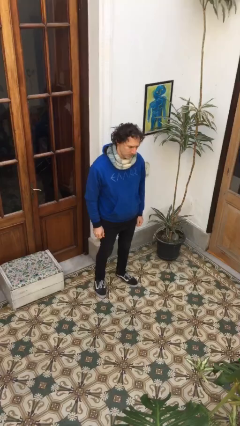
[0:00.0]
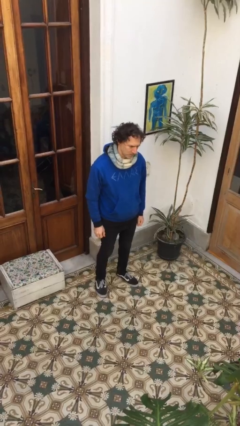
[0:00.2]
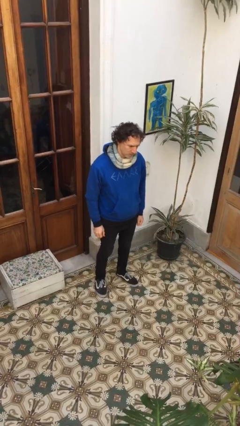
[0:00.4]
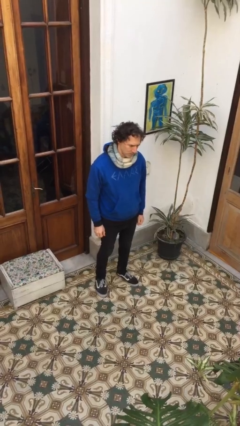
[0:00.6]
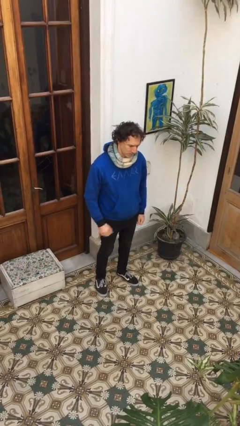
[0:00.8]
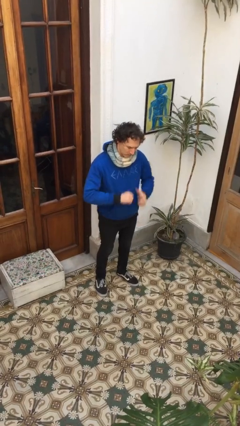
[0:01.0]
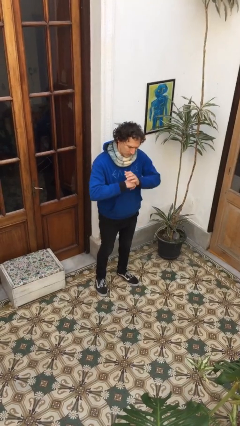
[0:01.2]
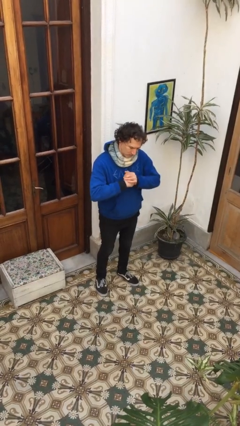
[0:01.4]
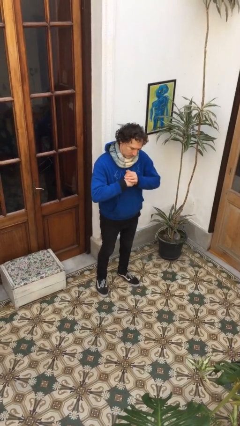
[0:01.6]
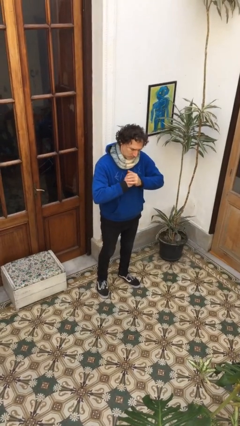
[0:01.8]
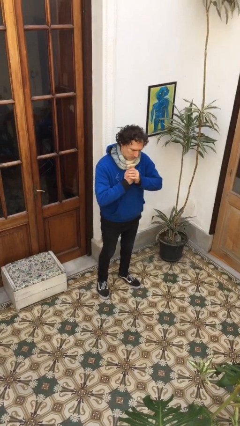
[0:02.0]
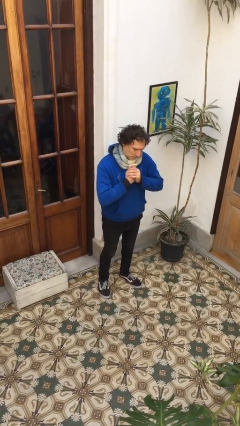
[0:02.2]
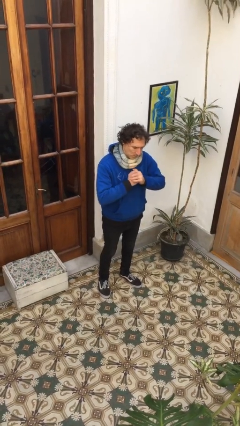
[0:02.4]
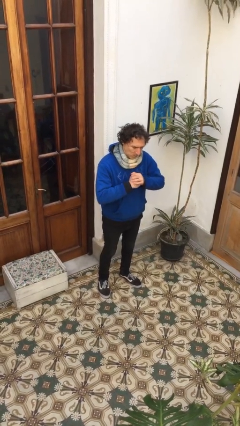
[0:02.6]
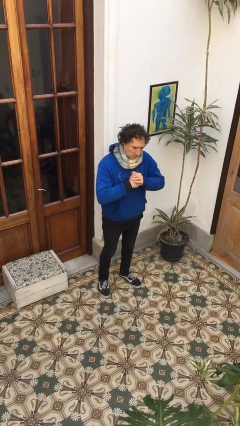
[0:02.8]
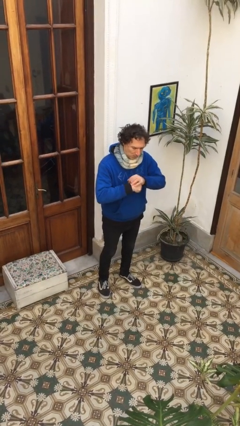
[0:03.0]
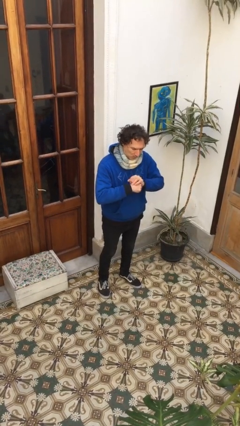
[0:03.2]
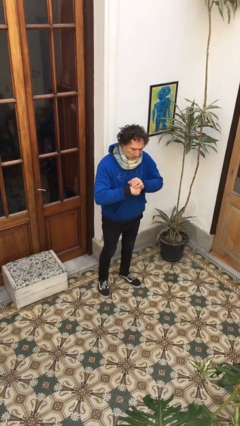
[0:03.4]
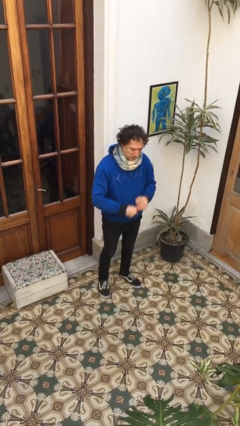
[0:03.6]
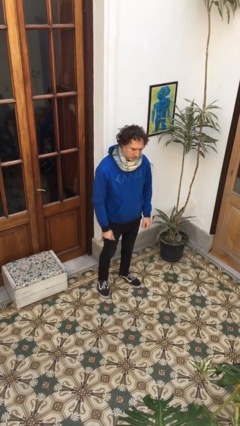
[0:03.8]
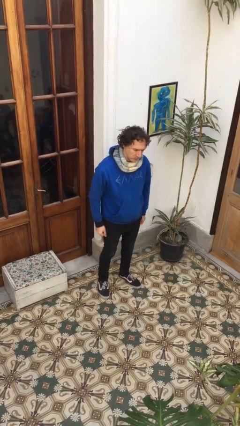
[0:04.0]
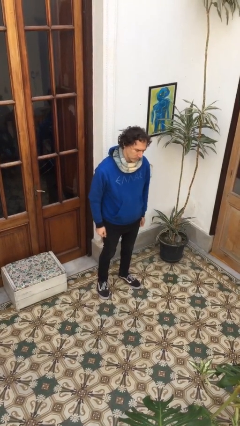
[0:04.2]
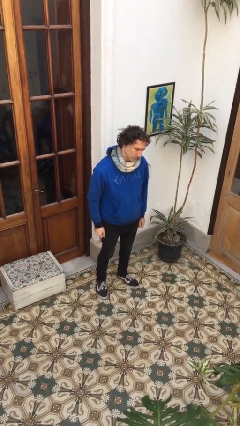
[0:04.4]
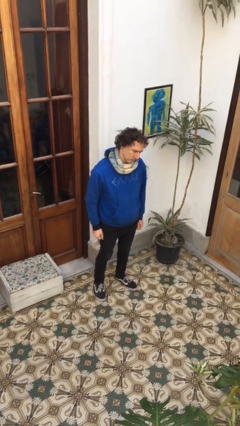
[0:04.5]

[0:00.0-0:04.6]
person cracks knuckles

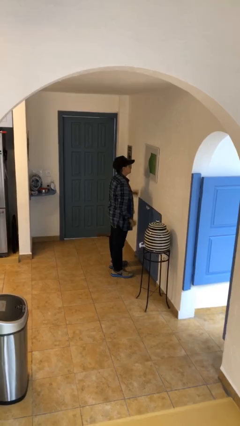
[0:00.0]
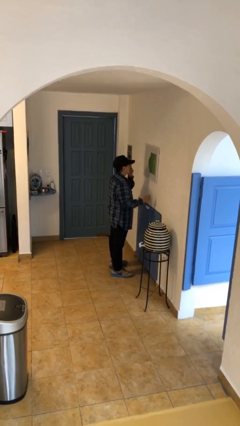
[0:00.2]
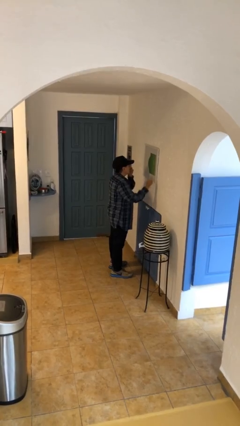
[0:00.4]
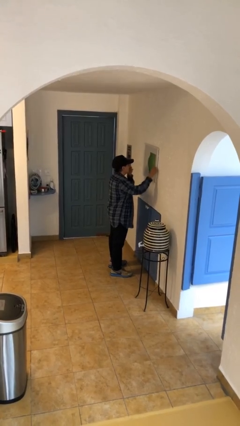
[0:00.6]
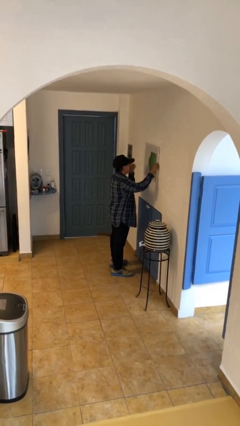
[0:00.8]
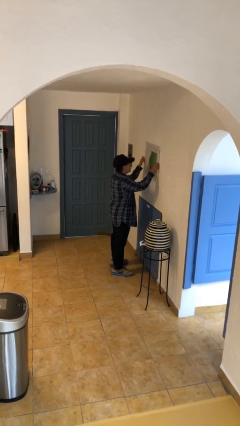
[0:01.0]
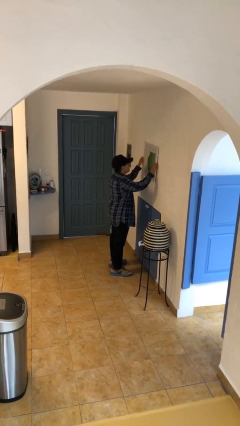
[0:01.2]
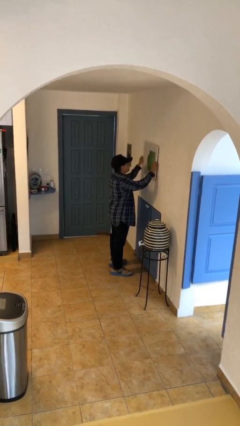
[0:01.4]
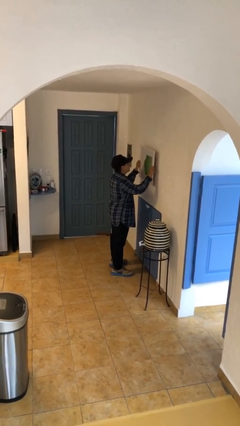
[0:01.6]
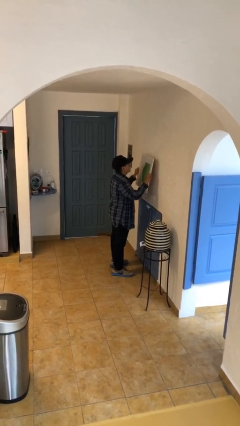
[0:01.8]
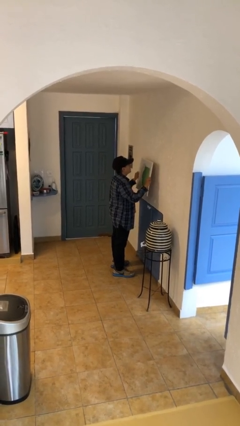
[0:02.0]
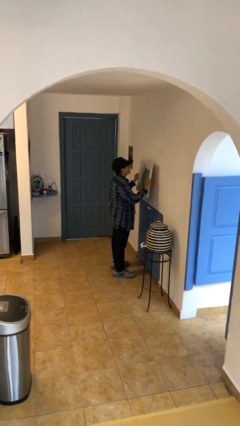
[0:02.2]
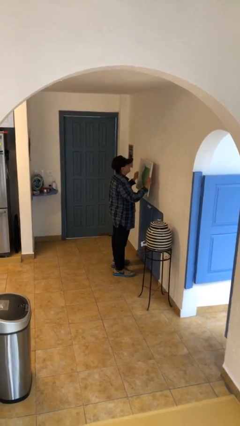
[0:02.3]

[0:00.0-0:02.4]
person takes down picture frame

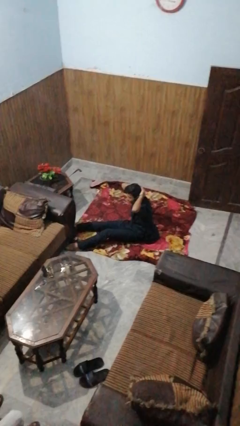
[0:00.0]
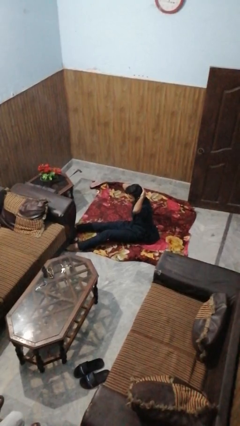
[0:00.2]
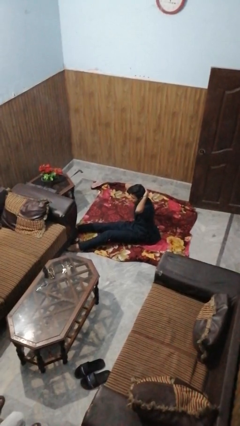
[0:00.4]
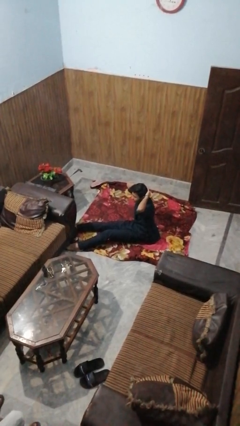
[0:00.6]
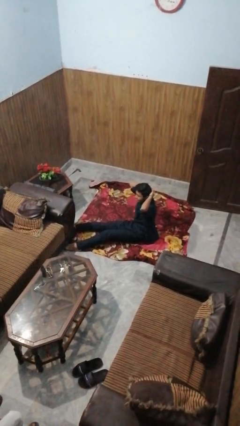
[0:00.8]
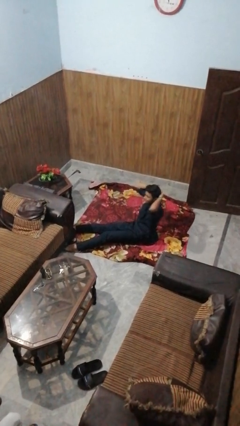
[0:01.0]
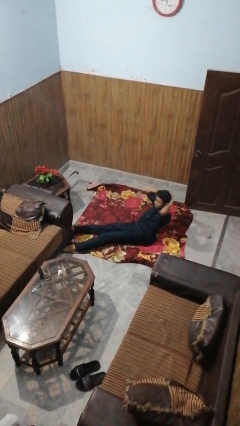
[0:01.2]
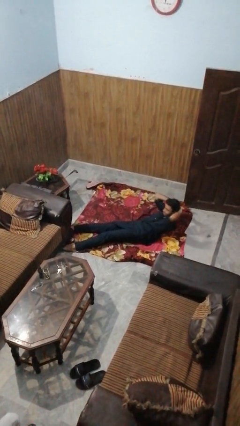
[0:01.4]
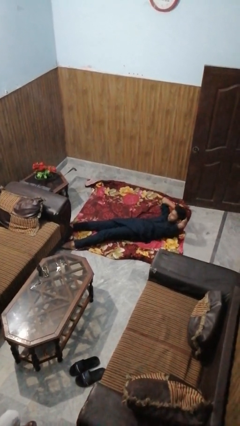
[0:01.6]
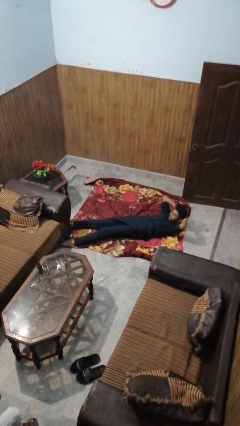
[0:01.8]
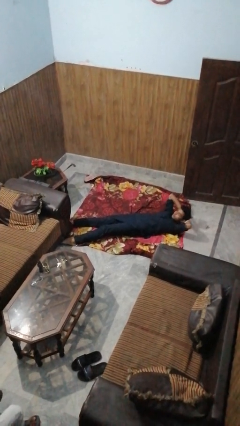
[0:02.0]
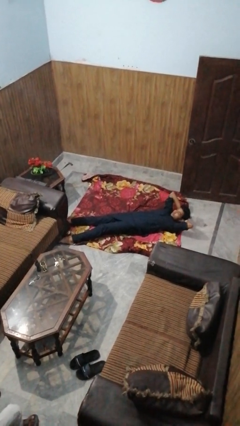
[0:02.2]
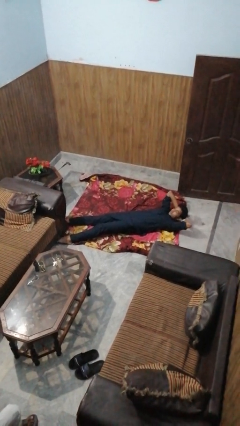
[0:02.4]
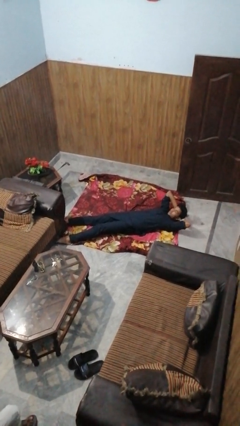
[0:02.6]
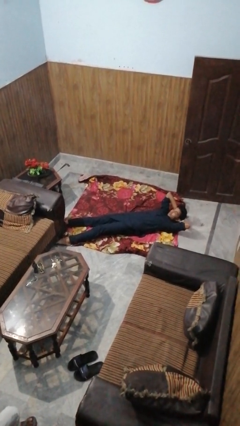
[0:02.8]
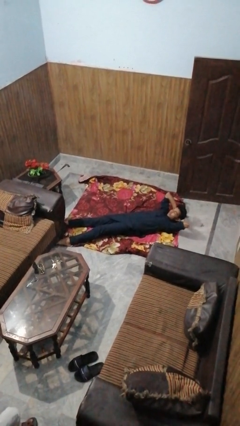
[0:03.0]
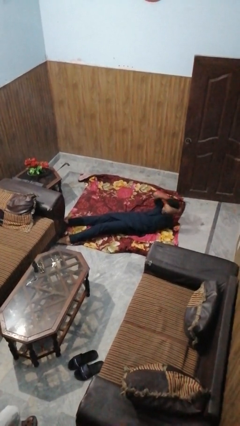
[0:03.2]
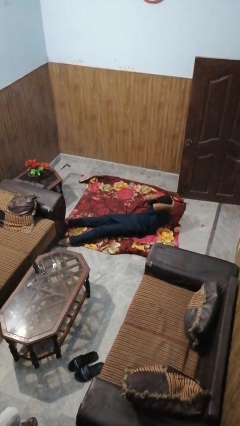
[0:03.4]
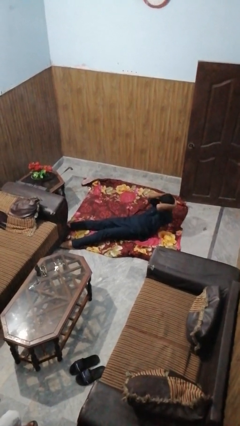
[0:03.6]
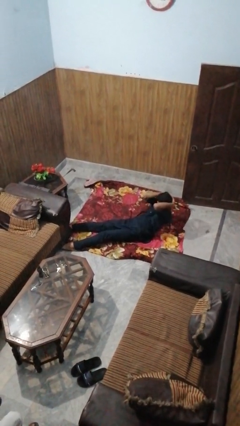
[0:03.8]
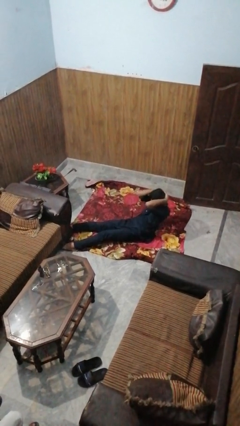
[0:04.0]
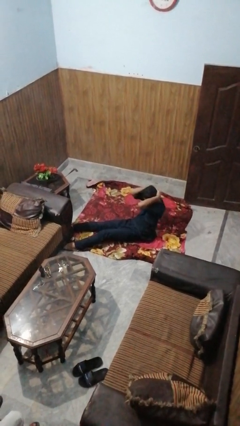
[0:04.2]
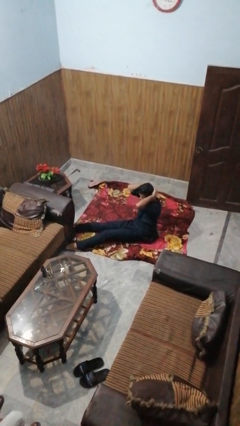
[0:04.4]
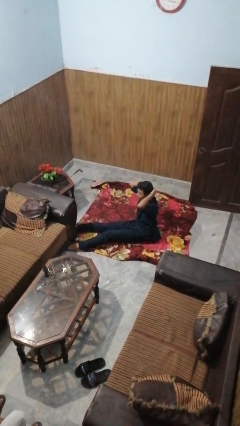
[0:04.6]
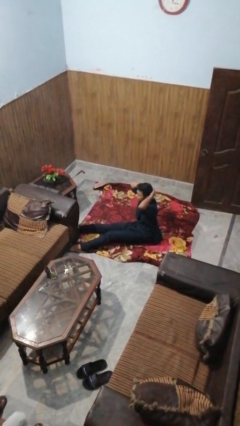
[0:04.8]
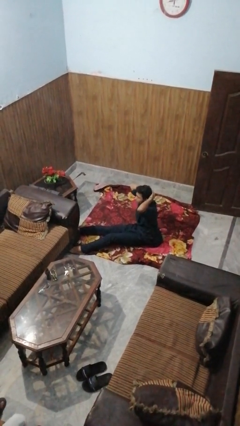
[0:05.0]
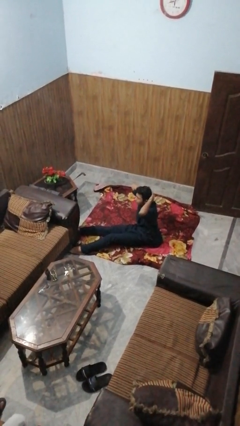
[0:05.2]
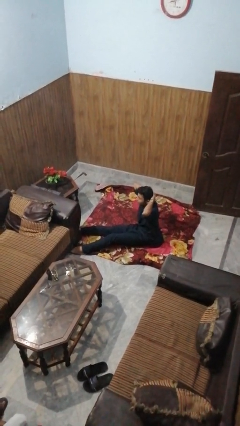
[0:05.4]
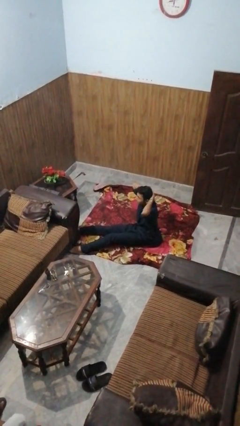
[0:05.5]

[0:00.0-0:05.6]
person exercises with situp

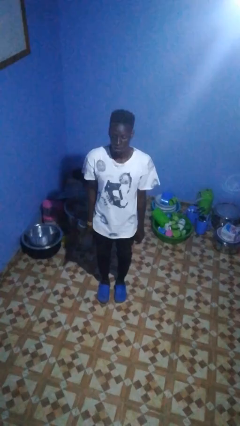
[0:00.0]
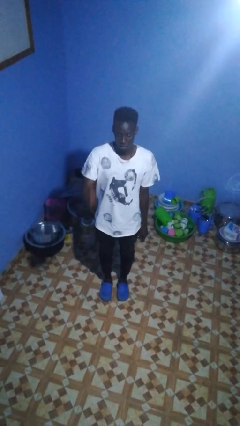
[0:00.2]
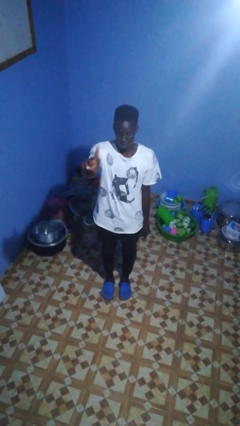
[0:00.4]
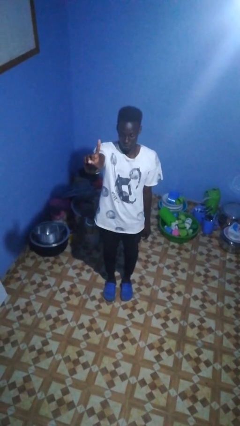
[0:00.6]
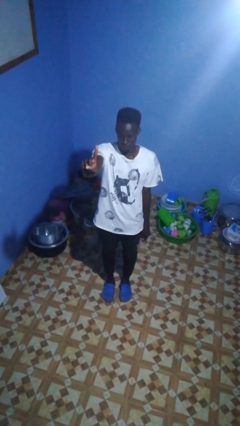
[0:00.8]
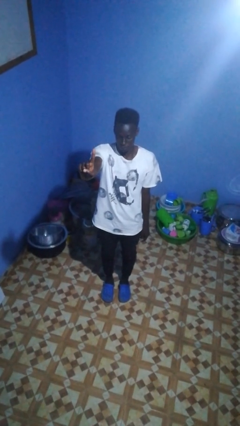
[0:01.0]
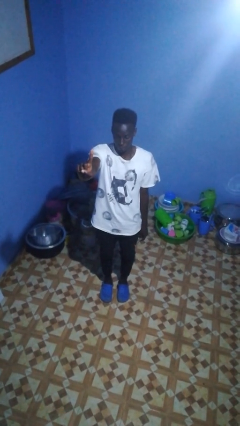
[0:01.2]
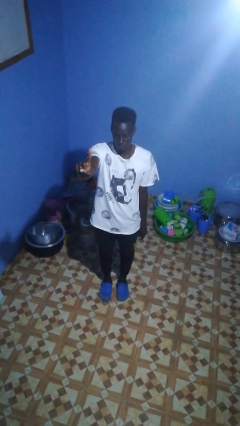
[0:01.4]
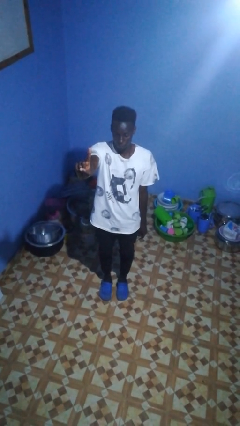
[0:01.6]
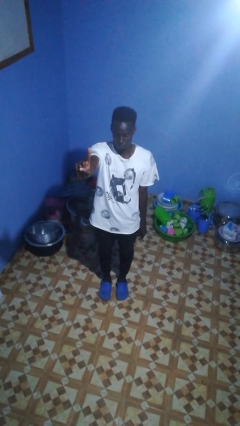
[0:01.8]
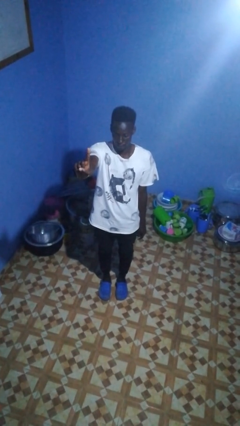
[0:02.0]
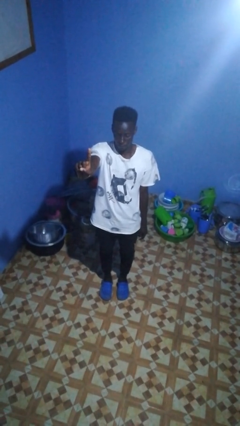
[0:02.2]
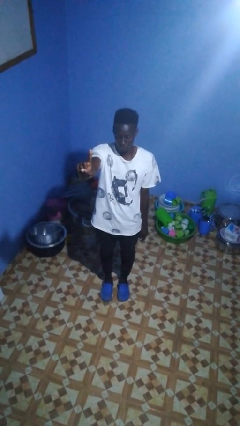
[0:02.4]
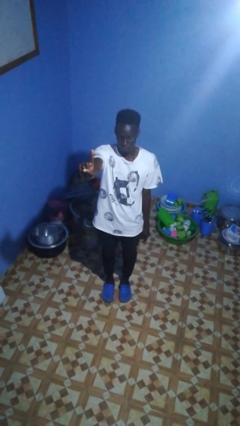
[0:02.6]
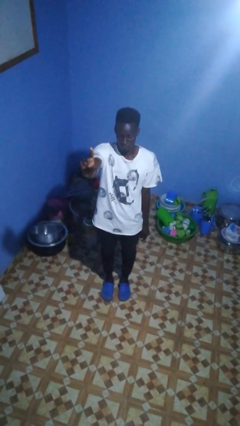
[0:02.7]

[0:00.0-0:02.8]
person gestures number one

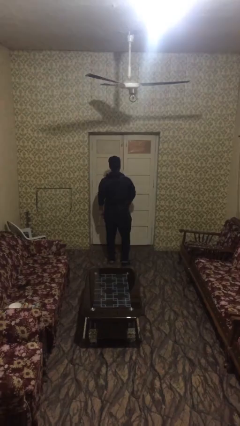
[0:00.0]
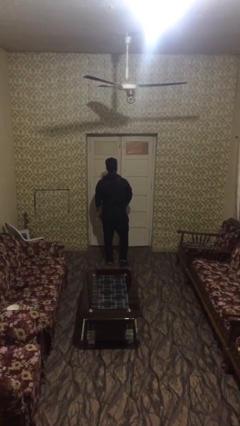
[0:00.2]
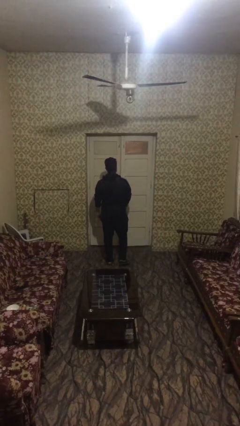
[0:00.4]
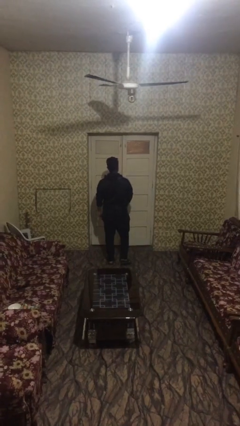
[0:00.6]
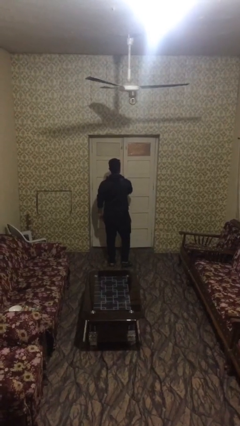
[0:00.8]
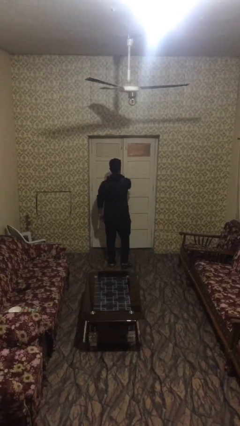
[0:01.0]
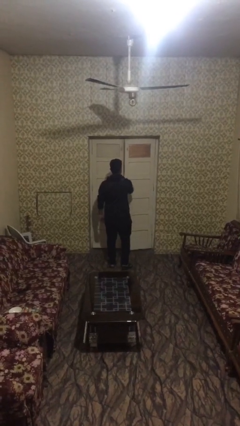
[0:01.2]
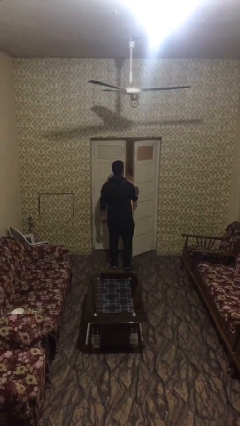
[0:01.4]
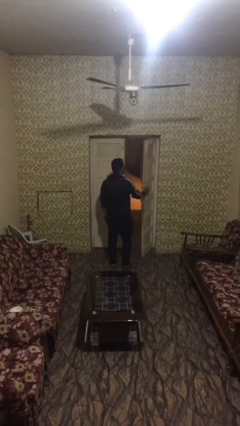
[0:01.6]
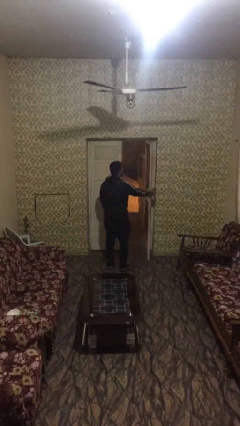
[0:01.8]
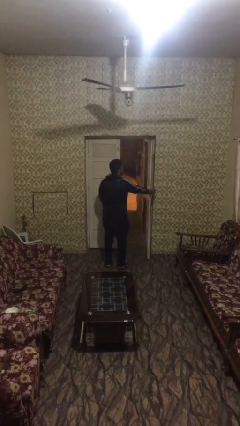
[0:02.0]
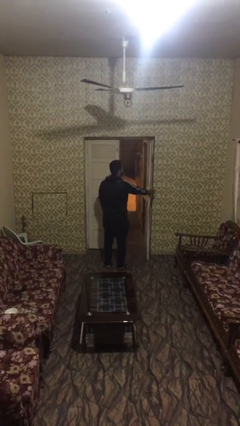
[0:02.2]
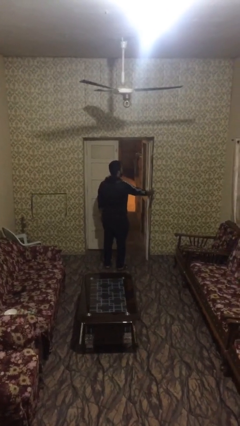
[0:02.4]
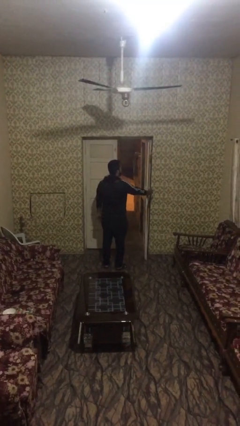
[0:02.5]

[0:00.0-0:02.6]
person opens facility door
